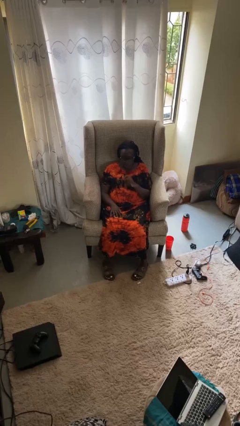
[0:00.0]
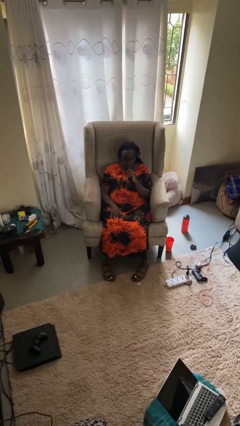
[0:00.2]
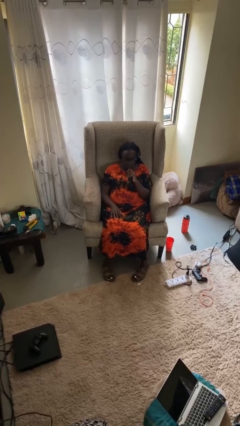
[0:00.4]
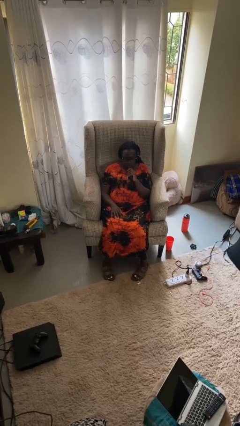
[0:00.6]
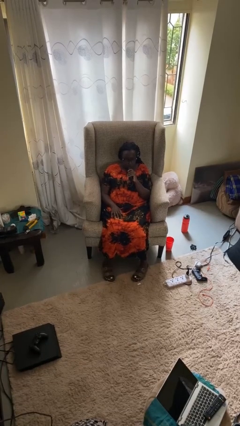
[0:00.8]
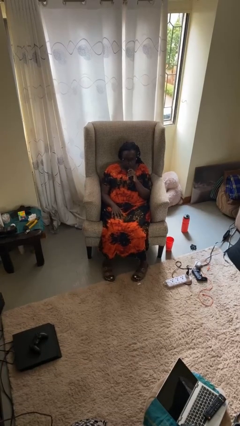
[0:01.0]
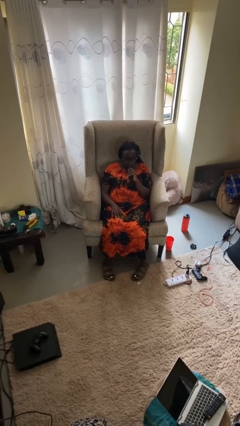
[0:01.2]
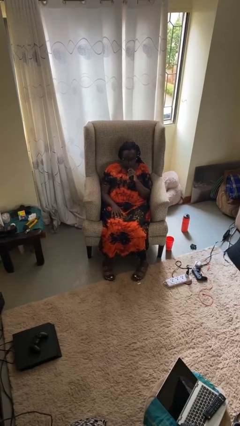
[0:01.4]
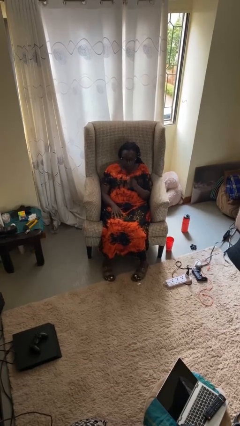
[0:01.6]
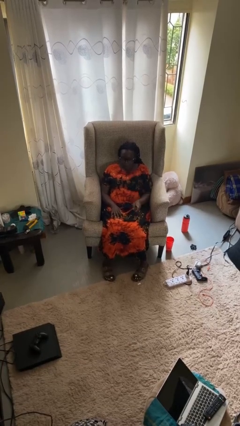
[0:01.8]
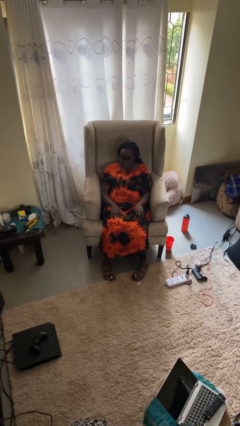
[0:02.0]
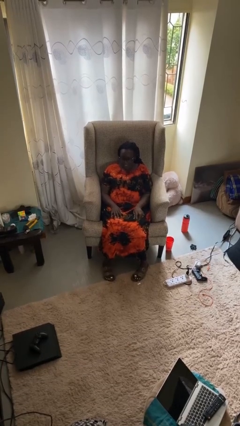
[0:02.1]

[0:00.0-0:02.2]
person vapes

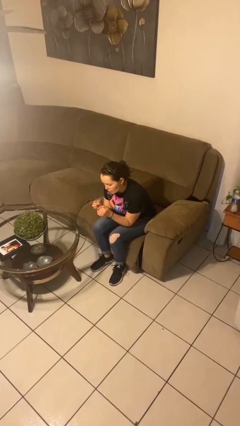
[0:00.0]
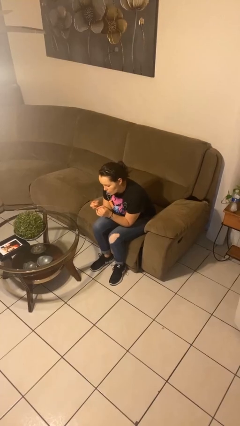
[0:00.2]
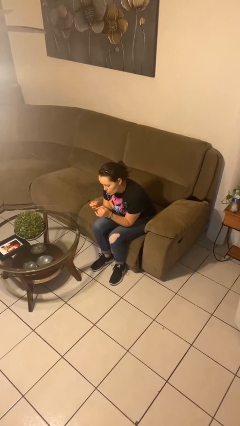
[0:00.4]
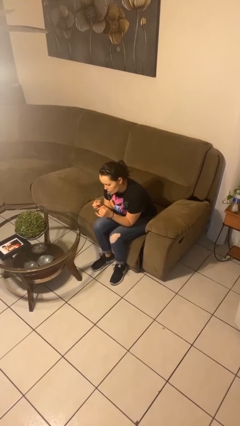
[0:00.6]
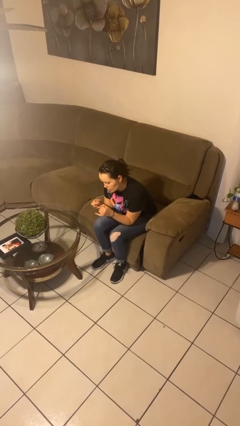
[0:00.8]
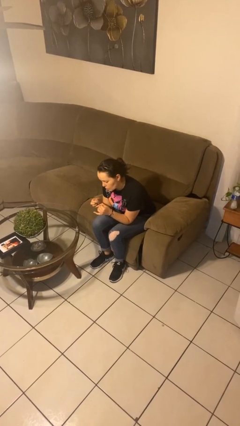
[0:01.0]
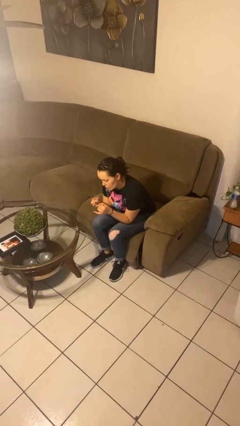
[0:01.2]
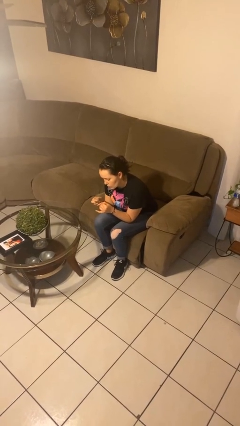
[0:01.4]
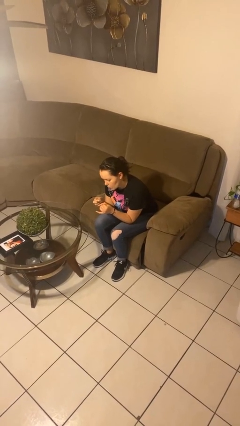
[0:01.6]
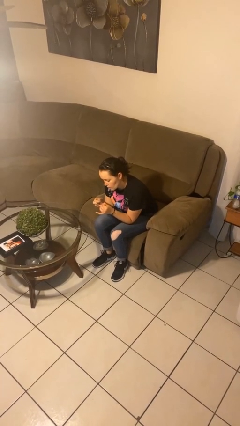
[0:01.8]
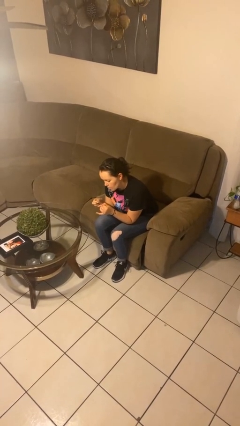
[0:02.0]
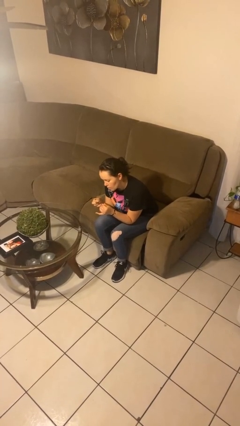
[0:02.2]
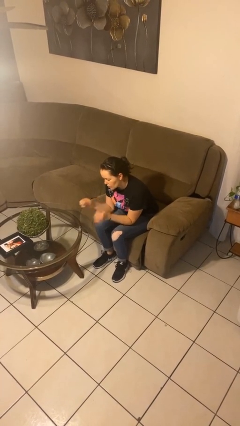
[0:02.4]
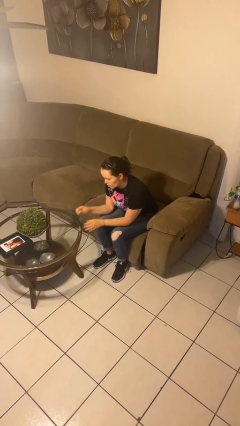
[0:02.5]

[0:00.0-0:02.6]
person paints fingernails

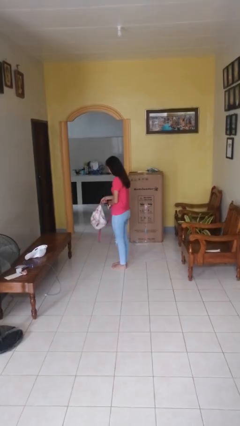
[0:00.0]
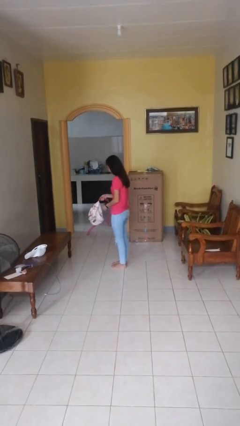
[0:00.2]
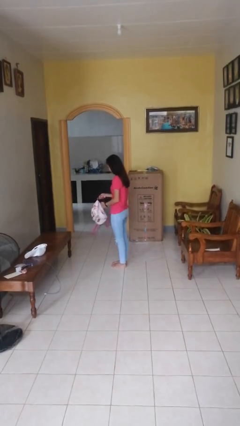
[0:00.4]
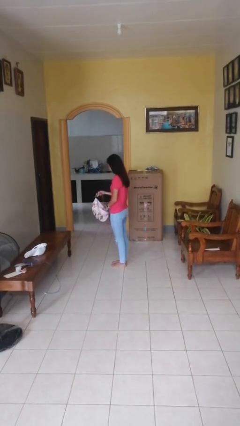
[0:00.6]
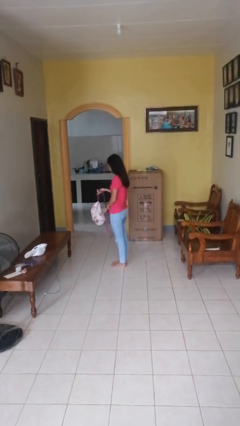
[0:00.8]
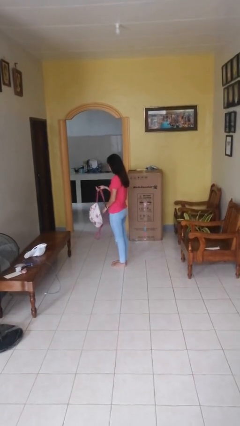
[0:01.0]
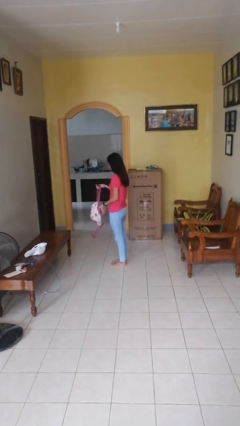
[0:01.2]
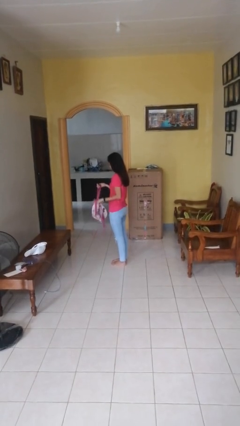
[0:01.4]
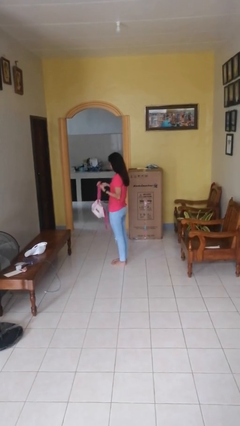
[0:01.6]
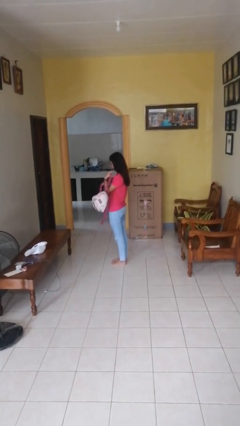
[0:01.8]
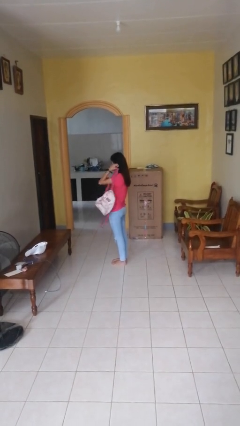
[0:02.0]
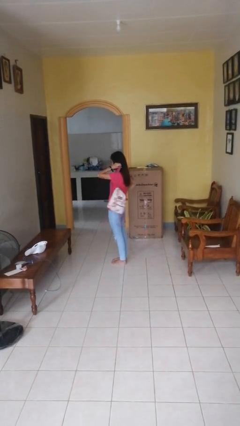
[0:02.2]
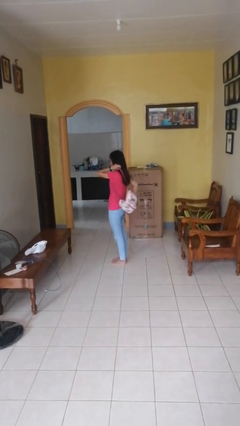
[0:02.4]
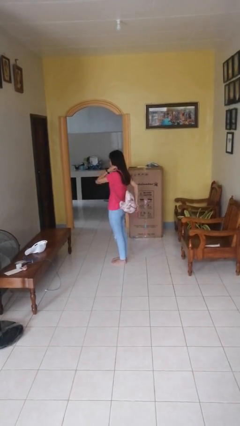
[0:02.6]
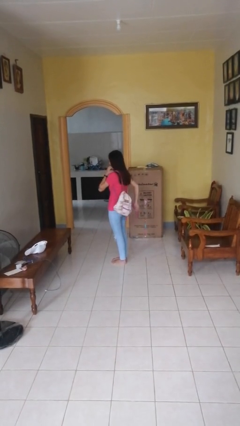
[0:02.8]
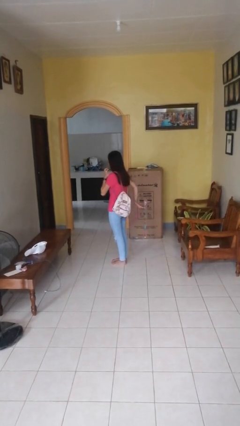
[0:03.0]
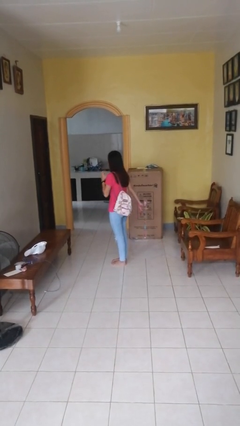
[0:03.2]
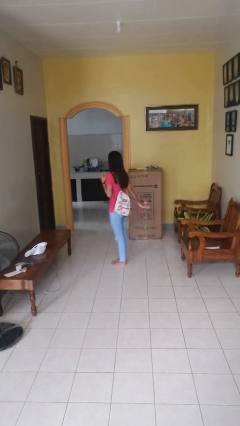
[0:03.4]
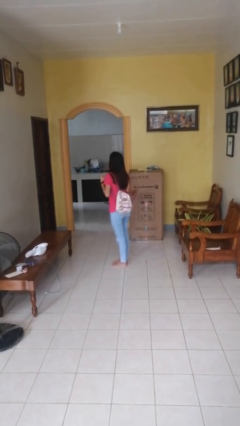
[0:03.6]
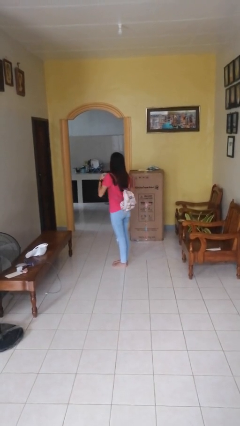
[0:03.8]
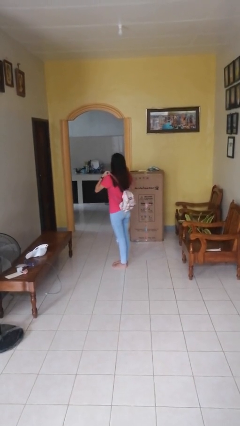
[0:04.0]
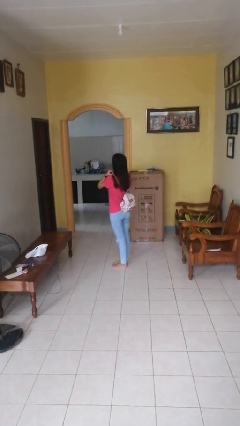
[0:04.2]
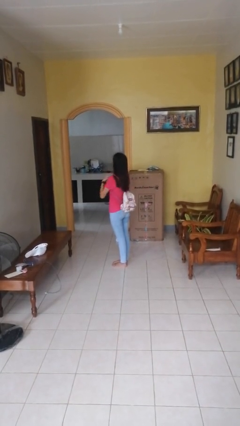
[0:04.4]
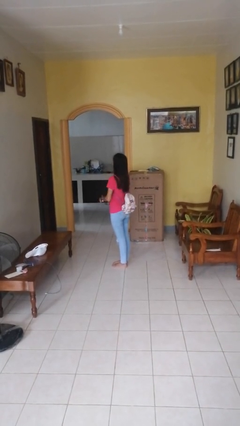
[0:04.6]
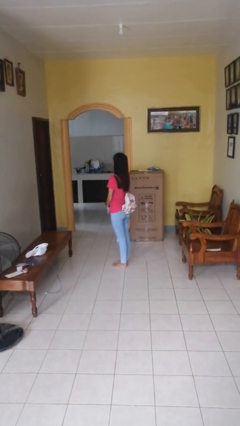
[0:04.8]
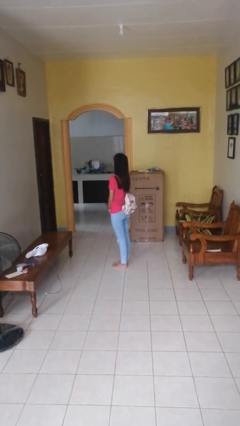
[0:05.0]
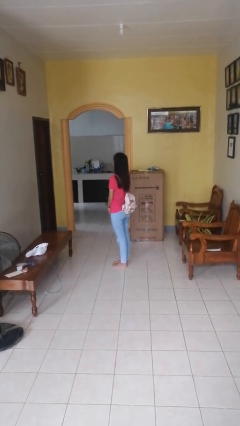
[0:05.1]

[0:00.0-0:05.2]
person puts on backpack

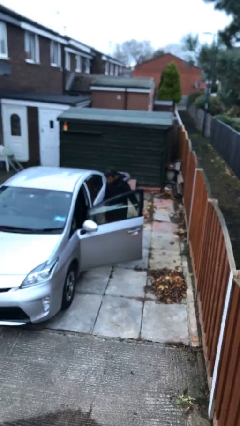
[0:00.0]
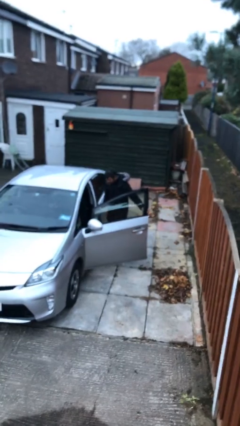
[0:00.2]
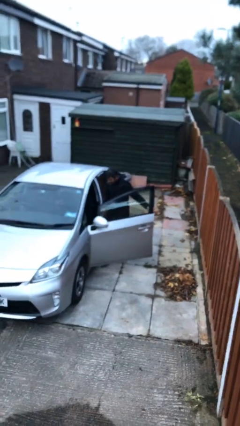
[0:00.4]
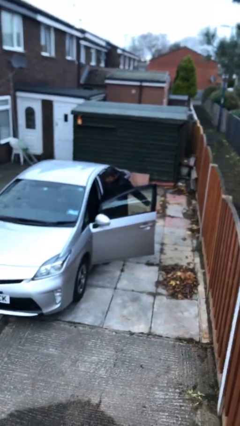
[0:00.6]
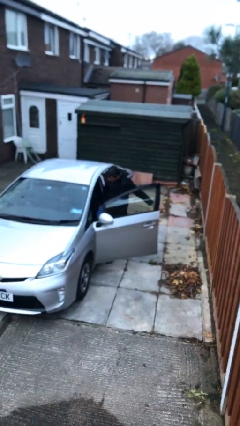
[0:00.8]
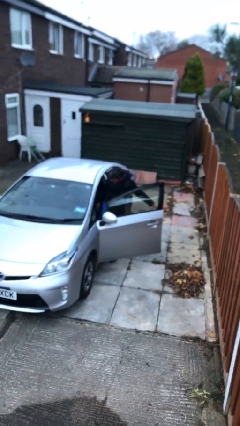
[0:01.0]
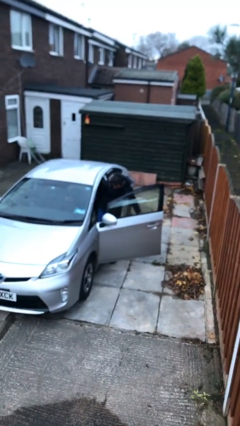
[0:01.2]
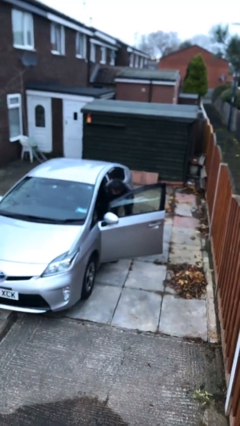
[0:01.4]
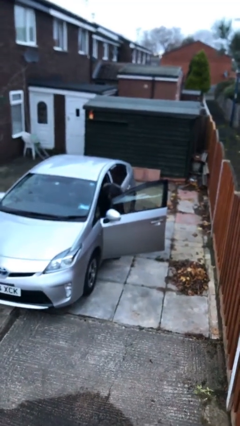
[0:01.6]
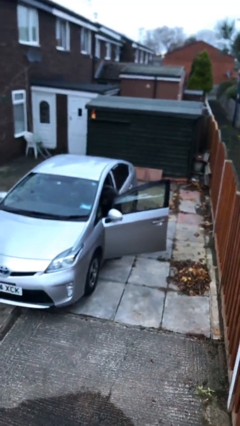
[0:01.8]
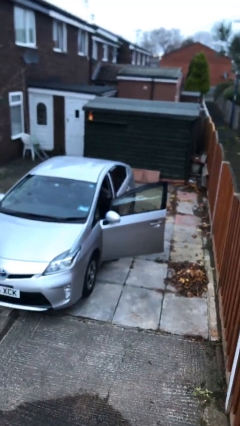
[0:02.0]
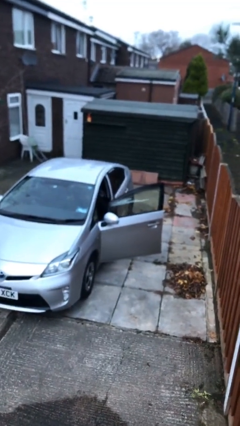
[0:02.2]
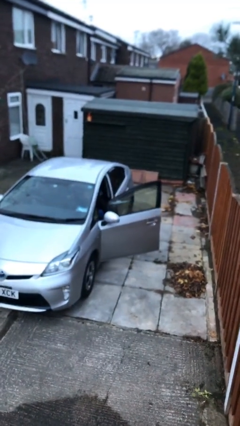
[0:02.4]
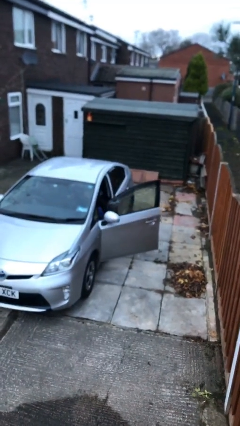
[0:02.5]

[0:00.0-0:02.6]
person enters car

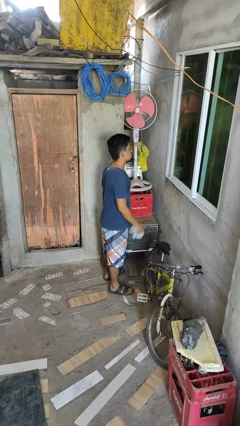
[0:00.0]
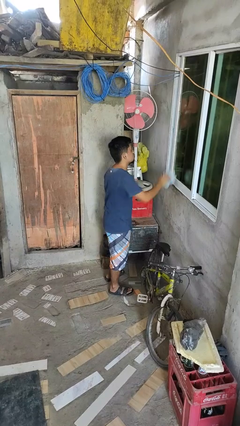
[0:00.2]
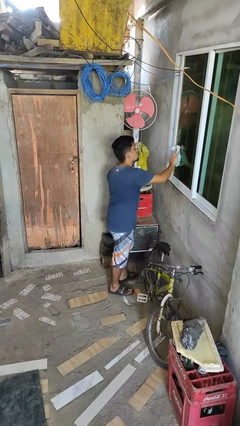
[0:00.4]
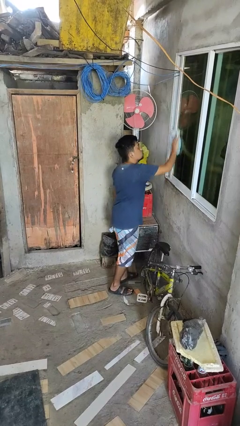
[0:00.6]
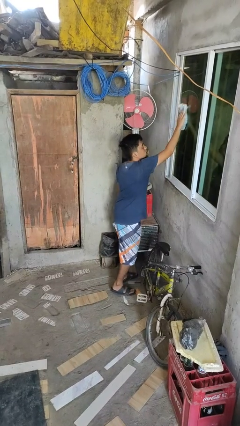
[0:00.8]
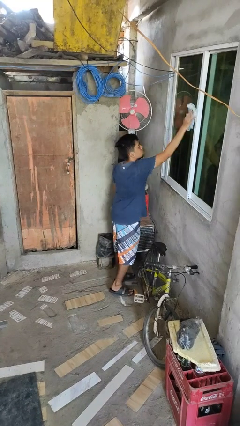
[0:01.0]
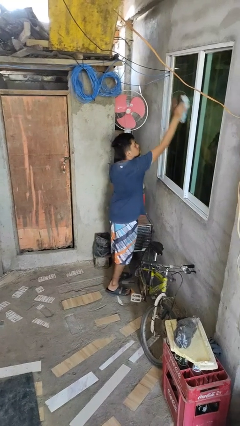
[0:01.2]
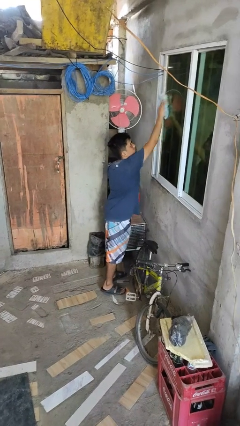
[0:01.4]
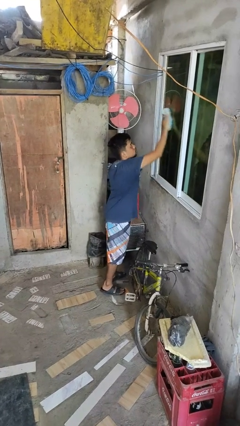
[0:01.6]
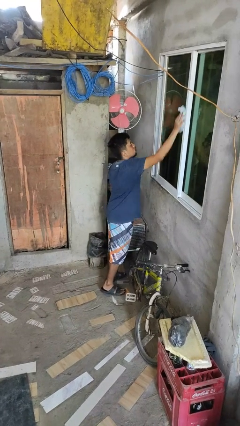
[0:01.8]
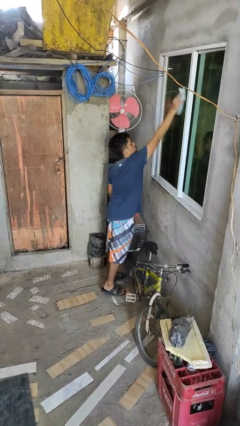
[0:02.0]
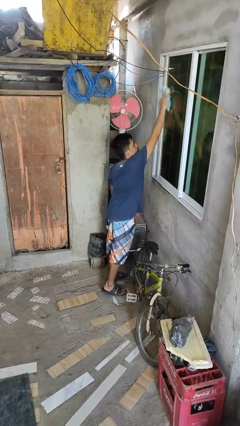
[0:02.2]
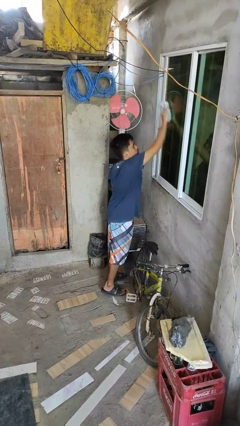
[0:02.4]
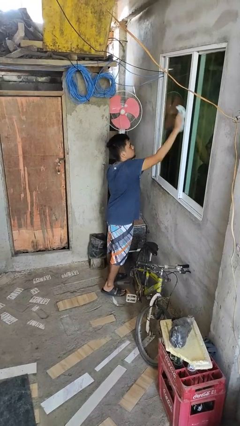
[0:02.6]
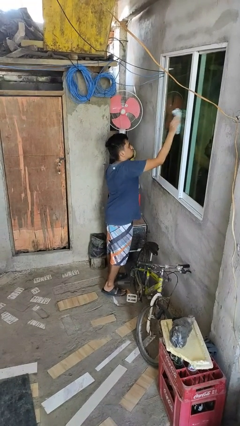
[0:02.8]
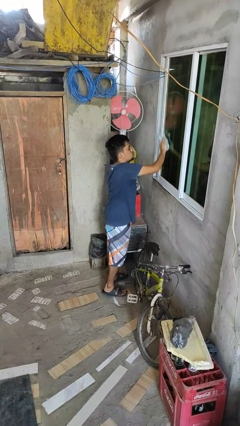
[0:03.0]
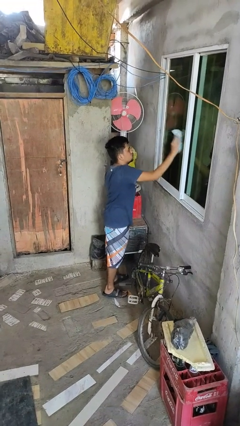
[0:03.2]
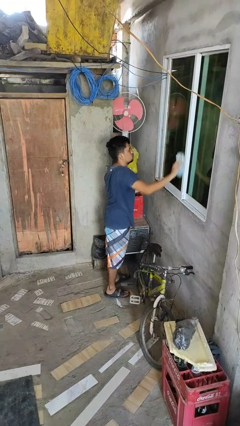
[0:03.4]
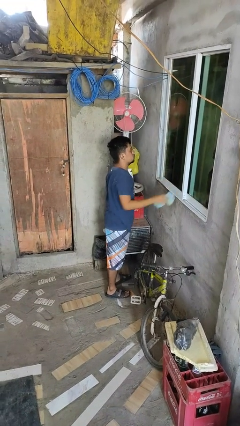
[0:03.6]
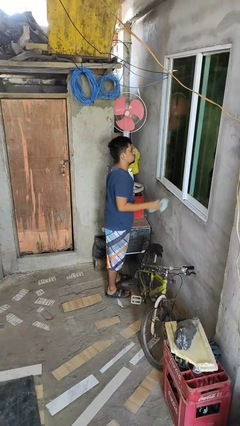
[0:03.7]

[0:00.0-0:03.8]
person washes window

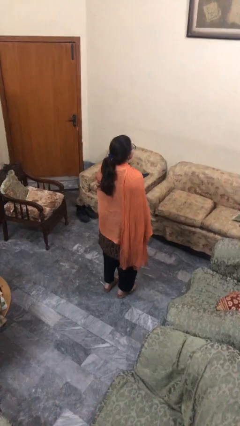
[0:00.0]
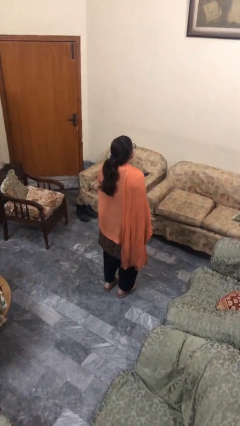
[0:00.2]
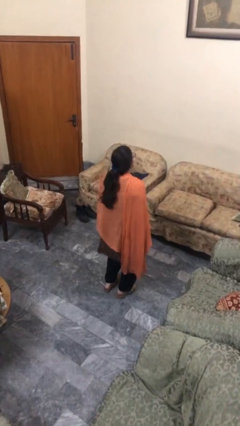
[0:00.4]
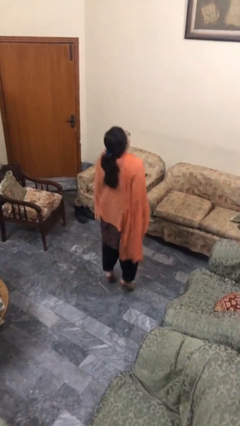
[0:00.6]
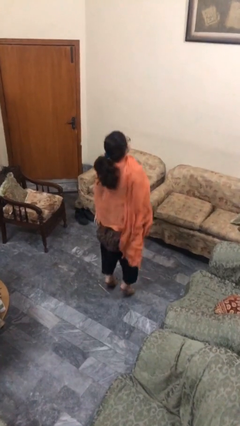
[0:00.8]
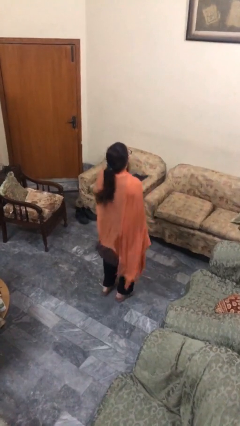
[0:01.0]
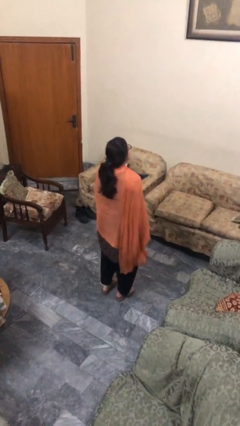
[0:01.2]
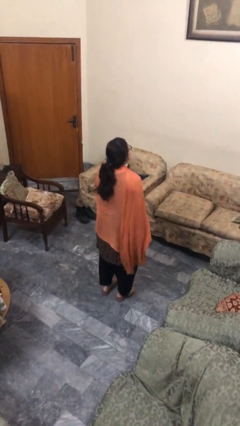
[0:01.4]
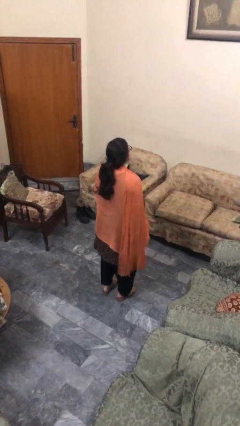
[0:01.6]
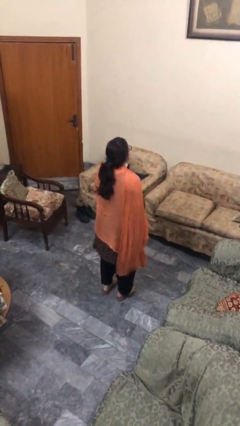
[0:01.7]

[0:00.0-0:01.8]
person jumps
